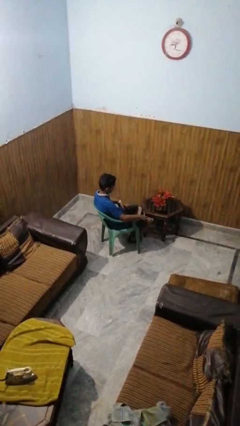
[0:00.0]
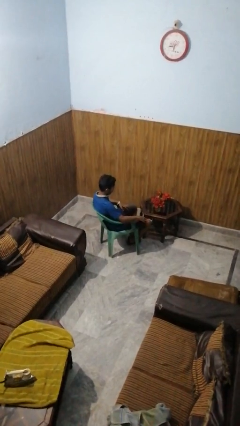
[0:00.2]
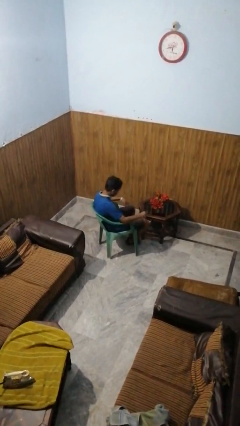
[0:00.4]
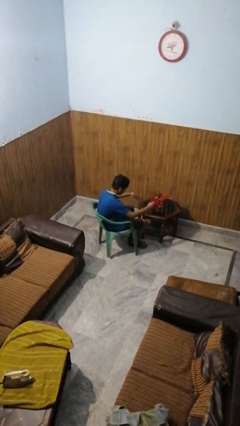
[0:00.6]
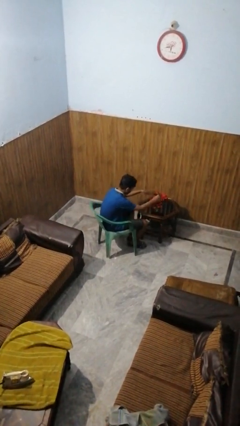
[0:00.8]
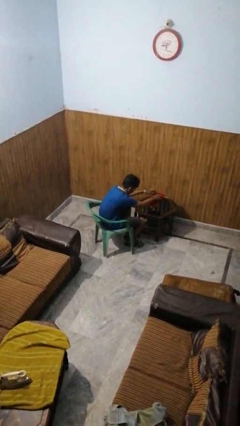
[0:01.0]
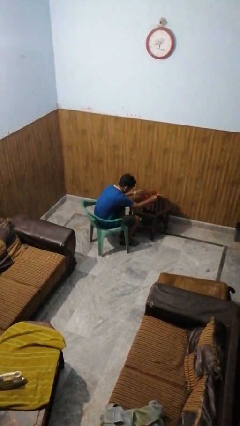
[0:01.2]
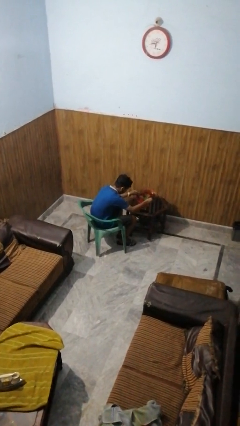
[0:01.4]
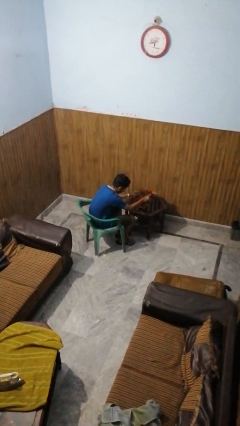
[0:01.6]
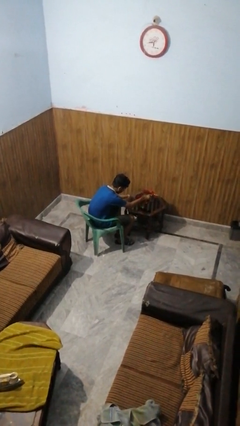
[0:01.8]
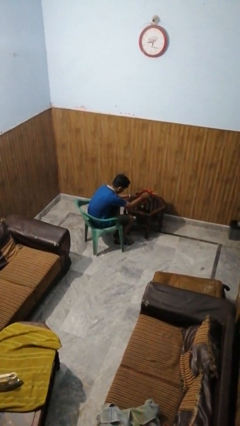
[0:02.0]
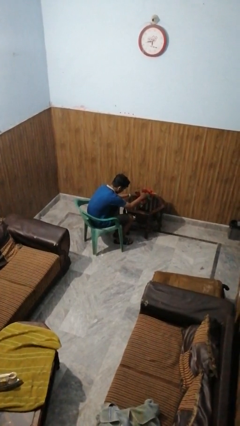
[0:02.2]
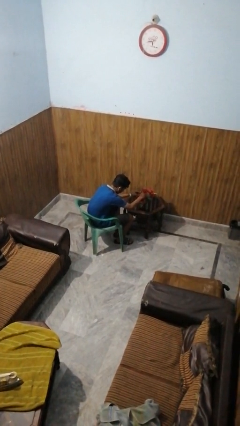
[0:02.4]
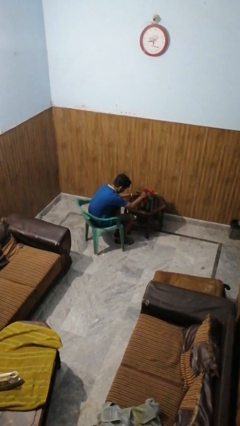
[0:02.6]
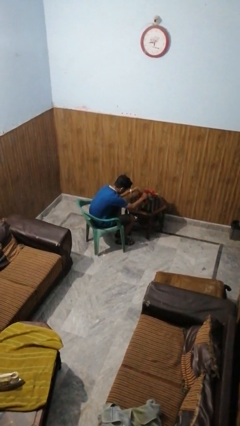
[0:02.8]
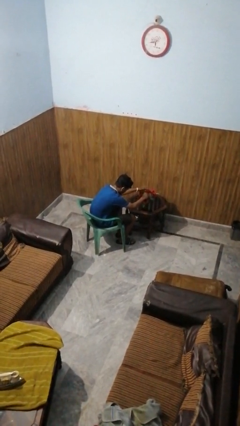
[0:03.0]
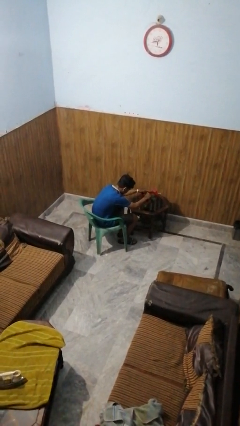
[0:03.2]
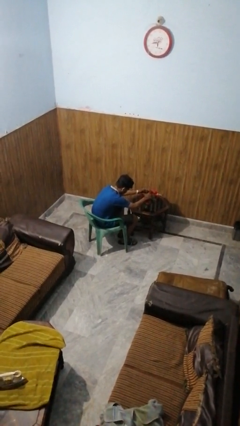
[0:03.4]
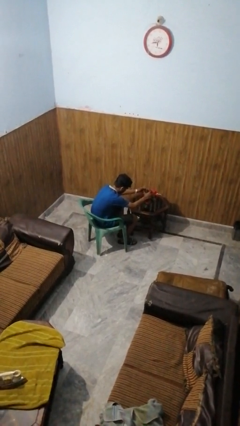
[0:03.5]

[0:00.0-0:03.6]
person arranges flowers in vase

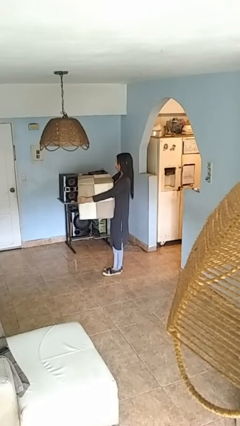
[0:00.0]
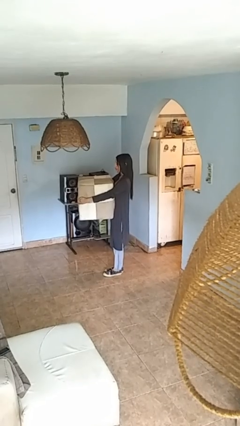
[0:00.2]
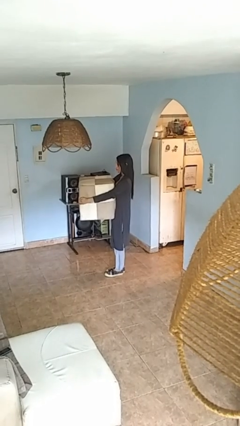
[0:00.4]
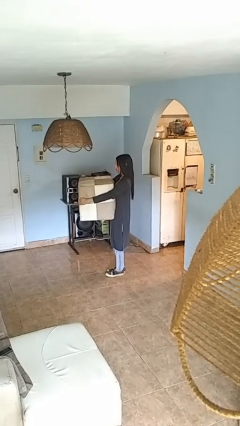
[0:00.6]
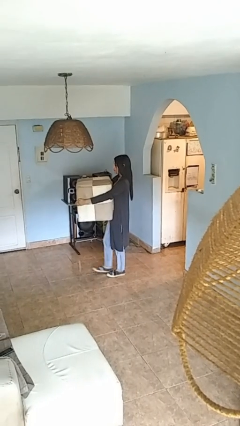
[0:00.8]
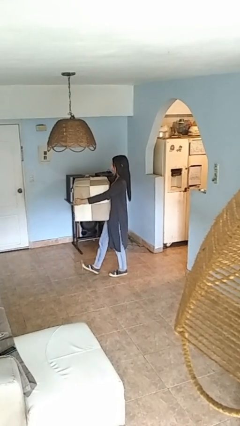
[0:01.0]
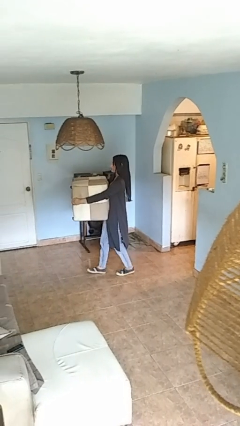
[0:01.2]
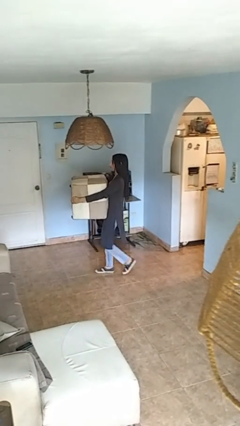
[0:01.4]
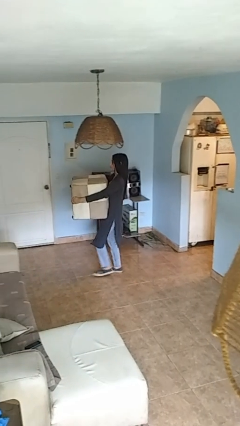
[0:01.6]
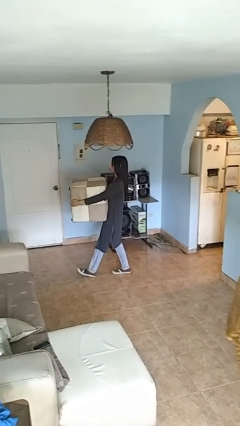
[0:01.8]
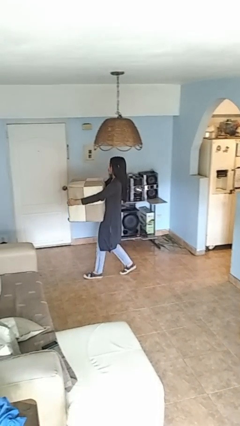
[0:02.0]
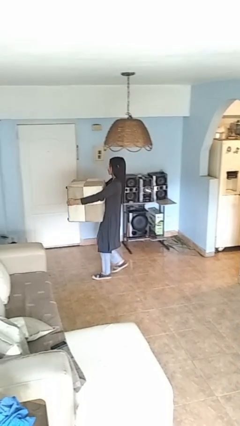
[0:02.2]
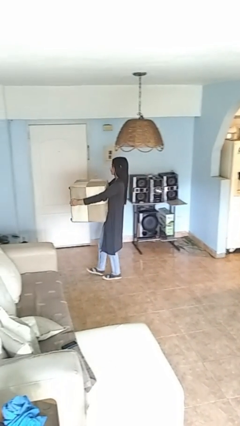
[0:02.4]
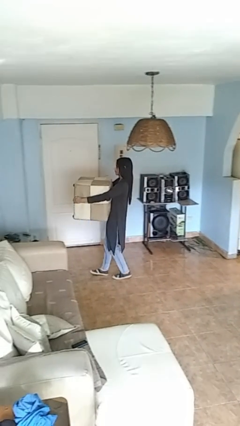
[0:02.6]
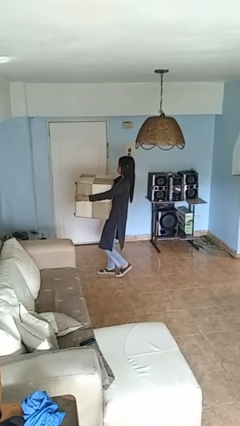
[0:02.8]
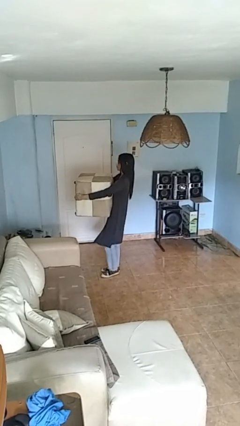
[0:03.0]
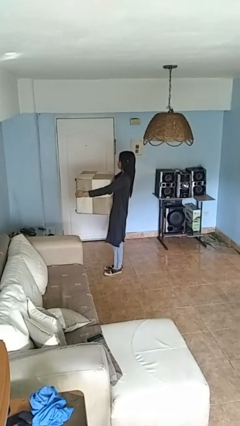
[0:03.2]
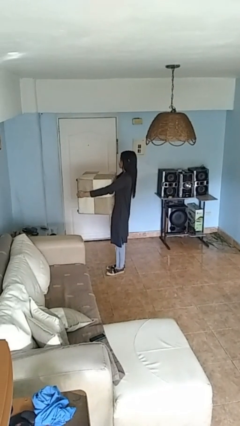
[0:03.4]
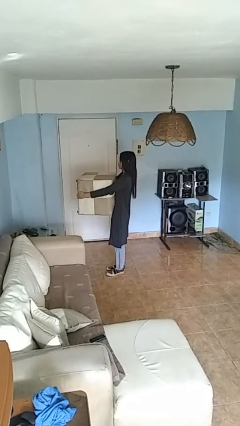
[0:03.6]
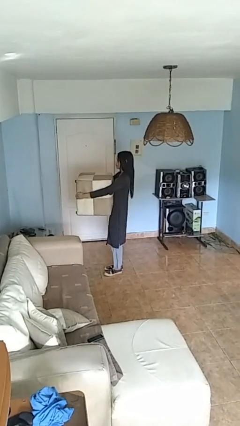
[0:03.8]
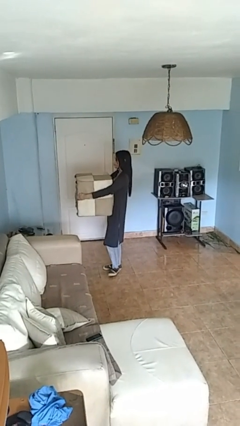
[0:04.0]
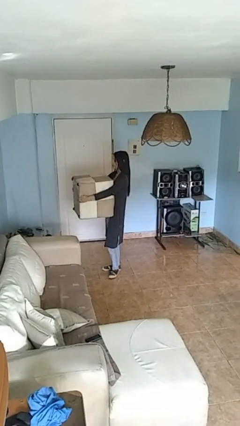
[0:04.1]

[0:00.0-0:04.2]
person carries laundry basket

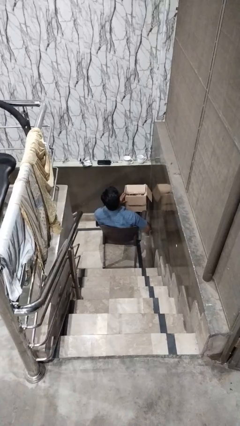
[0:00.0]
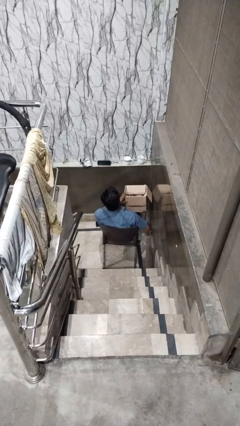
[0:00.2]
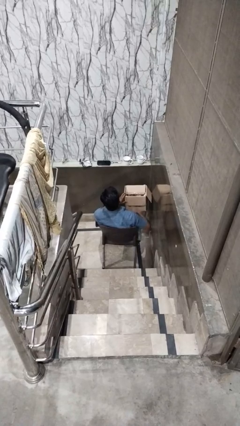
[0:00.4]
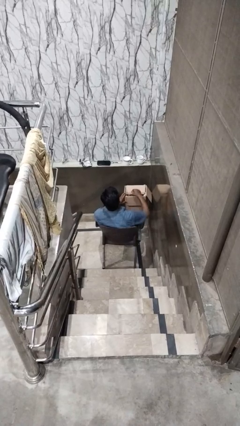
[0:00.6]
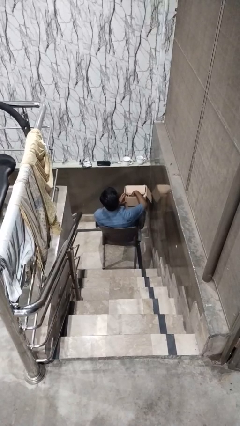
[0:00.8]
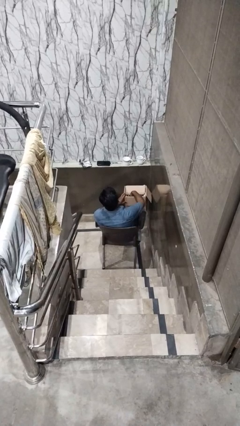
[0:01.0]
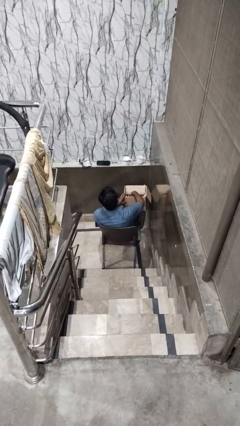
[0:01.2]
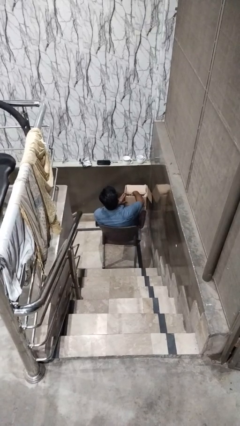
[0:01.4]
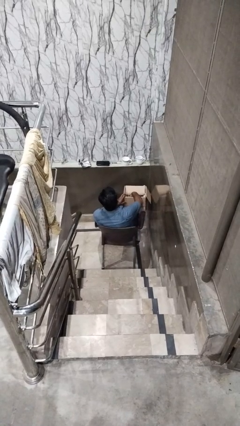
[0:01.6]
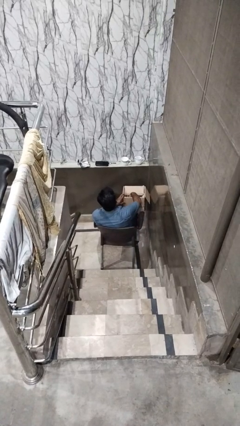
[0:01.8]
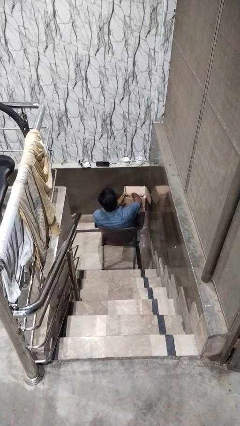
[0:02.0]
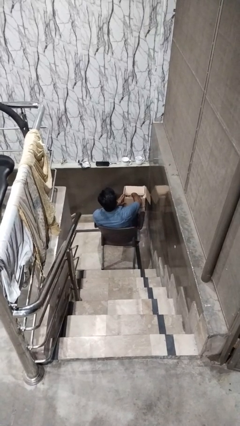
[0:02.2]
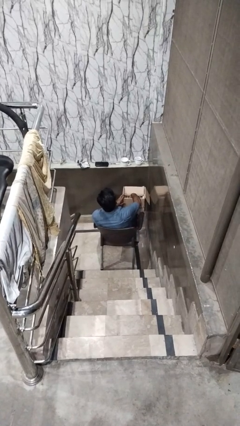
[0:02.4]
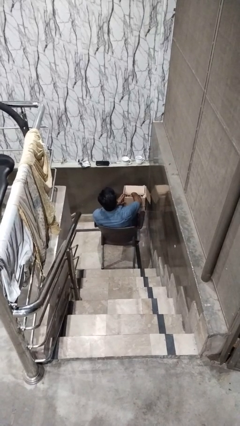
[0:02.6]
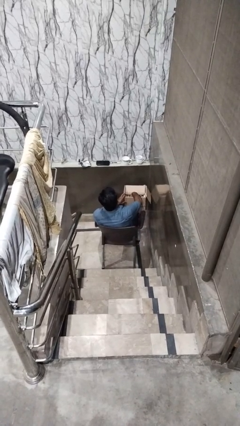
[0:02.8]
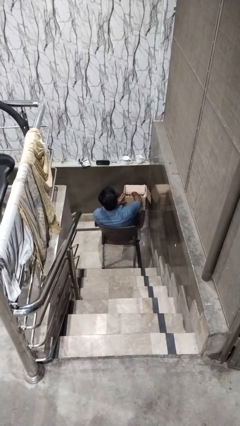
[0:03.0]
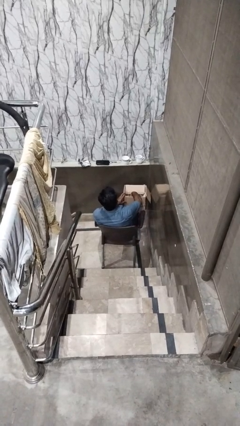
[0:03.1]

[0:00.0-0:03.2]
person searches in box

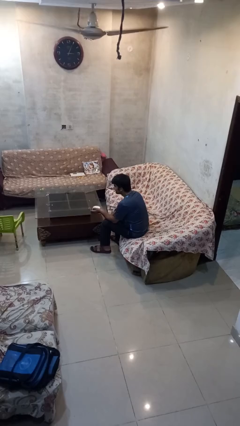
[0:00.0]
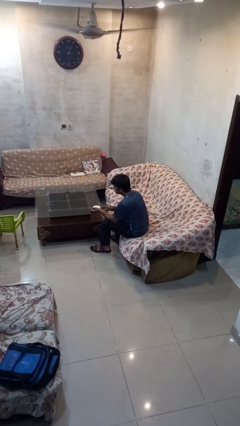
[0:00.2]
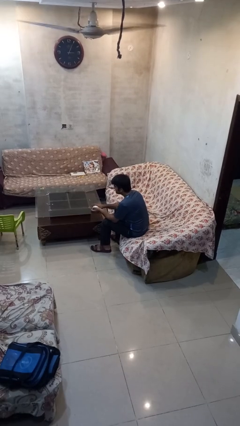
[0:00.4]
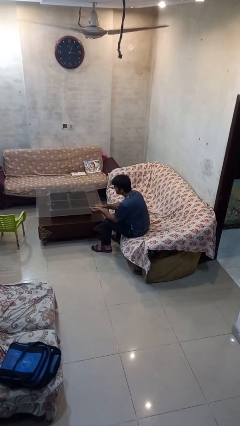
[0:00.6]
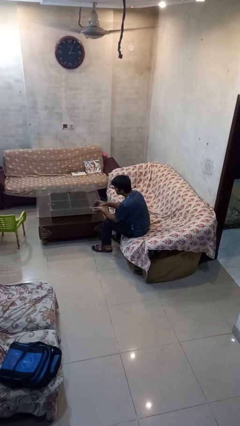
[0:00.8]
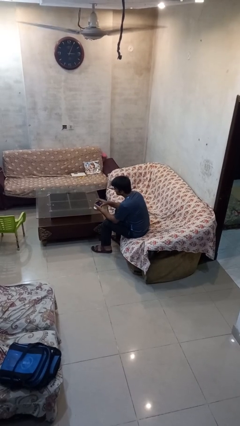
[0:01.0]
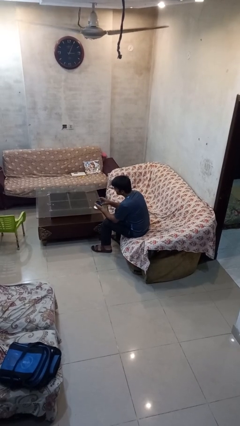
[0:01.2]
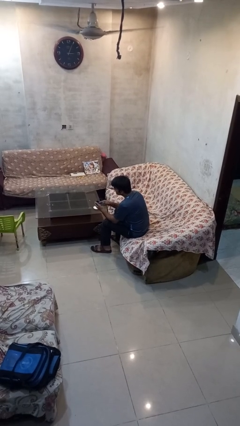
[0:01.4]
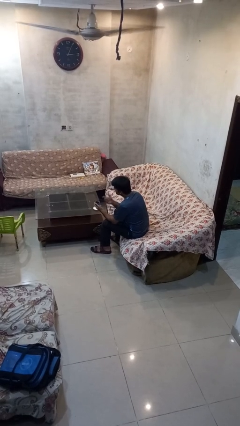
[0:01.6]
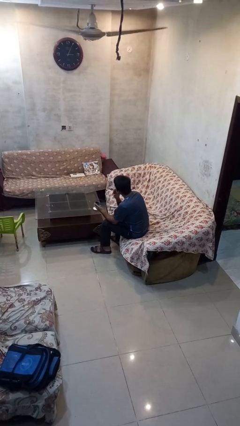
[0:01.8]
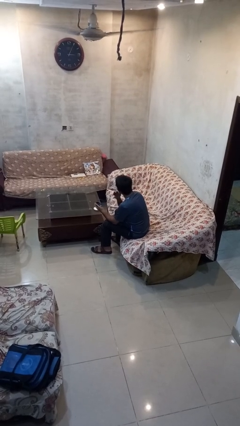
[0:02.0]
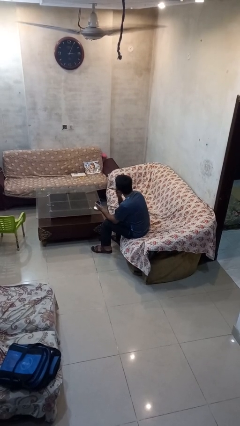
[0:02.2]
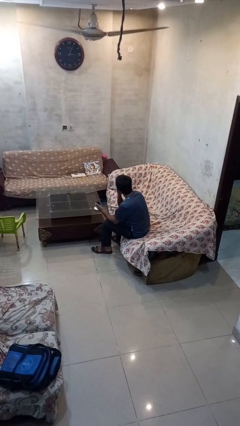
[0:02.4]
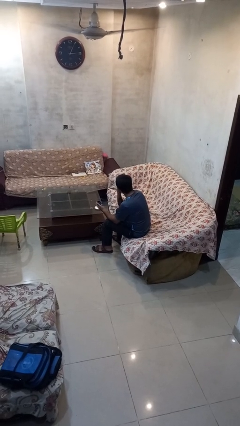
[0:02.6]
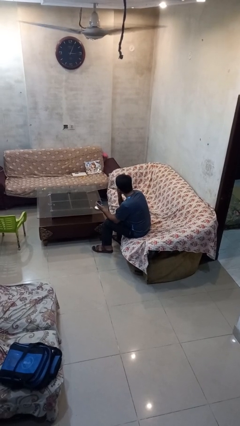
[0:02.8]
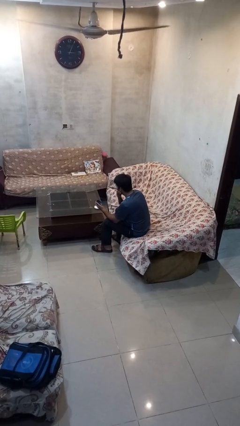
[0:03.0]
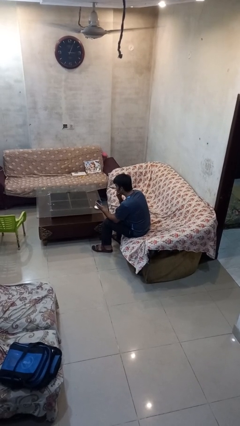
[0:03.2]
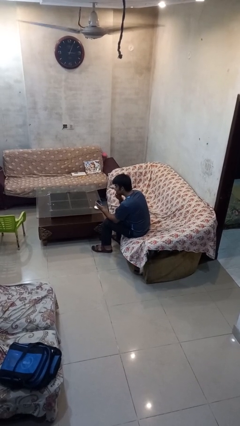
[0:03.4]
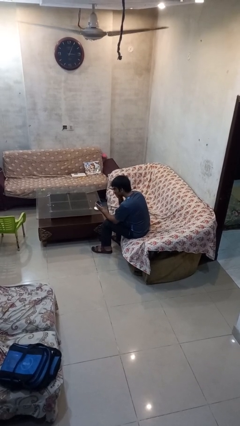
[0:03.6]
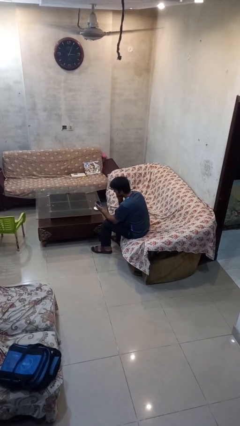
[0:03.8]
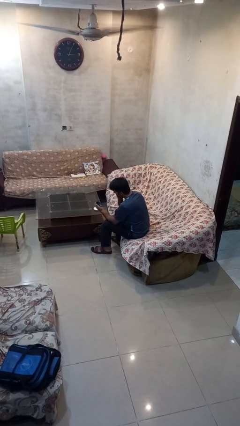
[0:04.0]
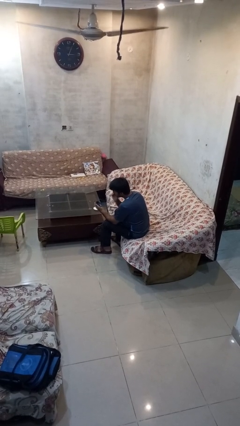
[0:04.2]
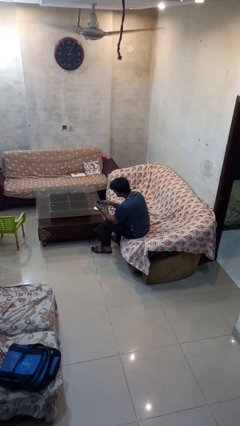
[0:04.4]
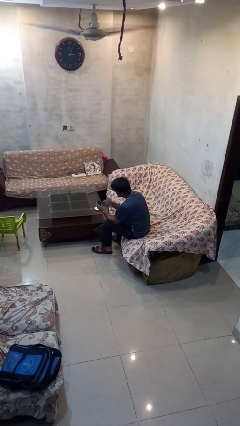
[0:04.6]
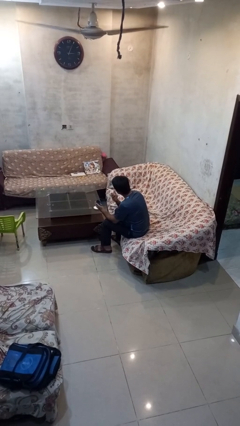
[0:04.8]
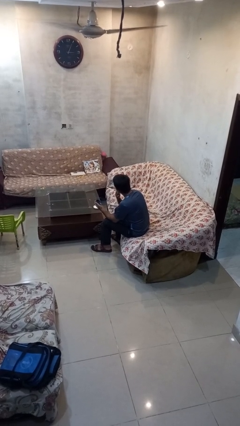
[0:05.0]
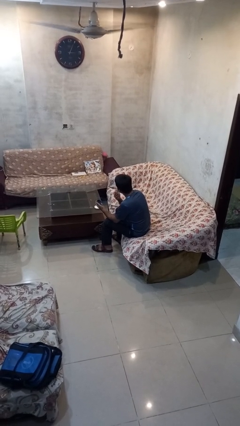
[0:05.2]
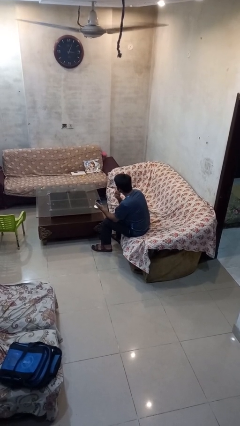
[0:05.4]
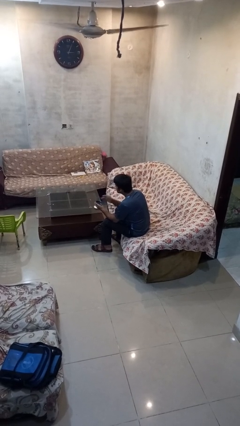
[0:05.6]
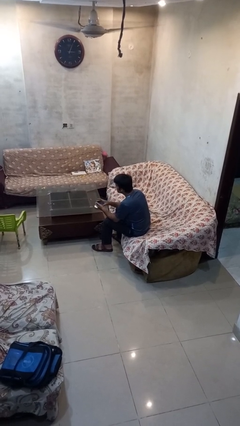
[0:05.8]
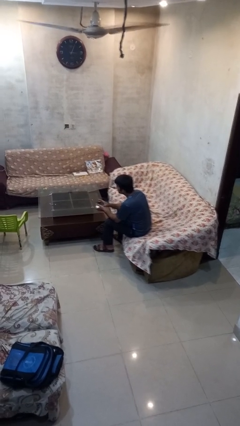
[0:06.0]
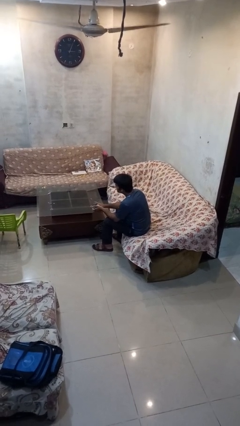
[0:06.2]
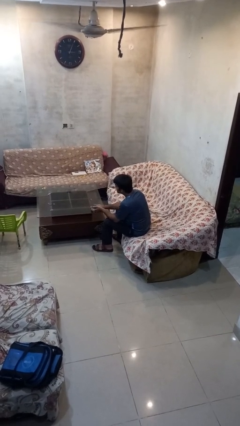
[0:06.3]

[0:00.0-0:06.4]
person applies facial moisturizer

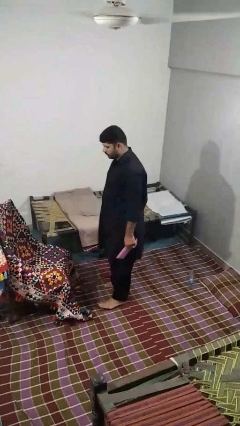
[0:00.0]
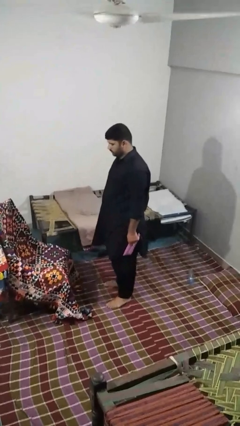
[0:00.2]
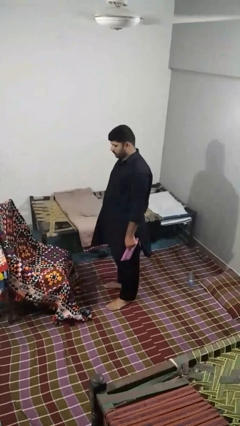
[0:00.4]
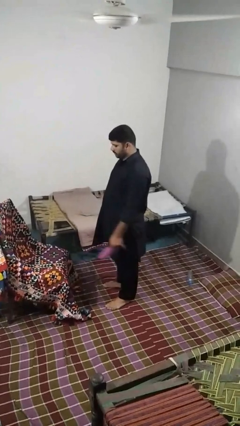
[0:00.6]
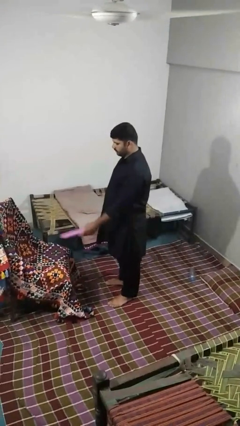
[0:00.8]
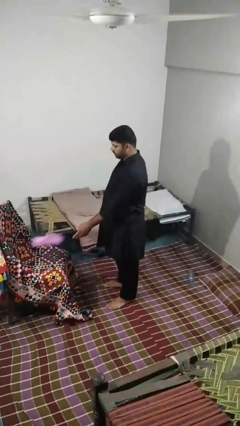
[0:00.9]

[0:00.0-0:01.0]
person puts down object on couch
